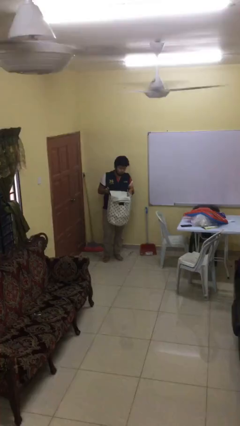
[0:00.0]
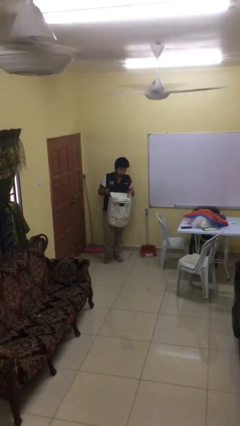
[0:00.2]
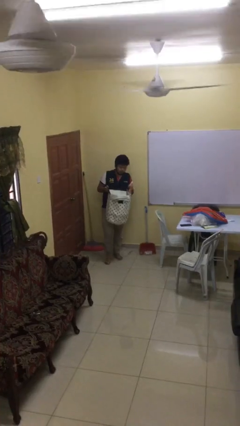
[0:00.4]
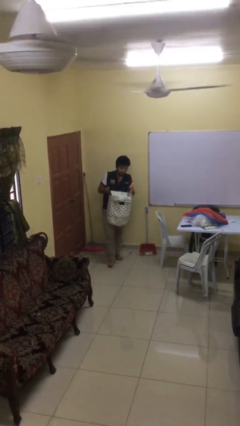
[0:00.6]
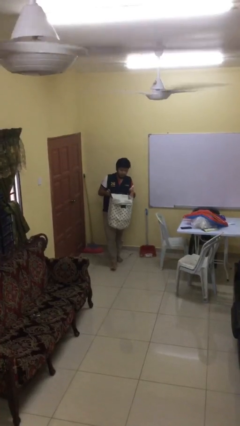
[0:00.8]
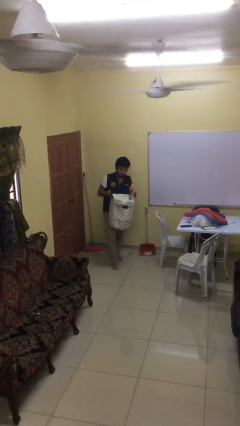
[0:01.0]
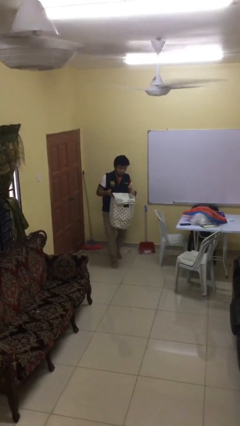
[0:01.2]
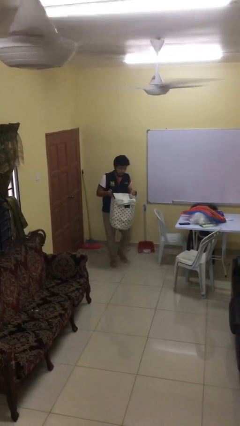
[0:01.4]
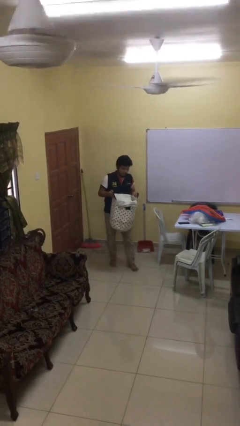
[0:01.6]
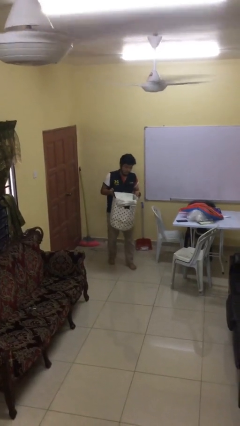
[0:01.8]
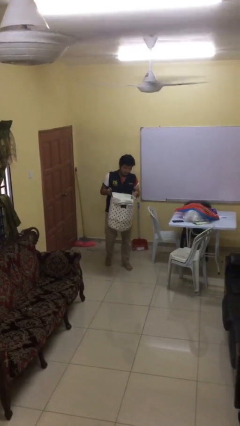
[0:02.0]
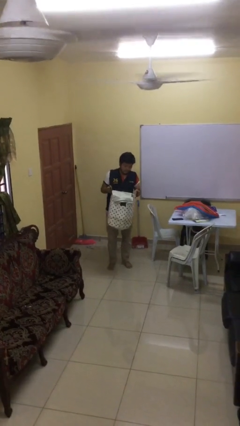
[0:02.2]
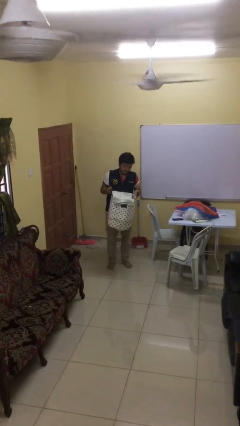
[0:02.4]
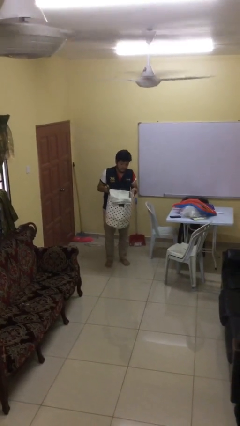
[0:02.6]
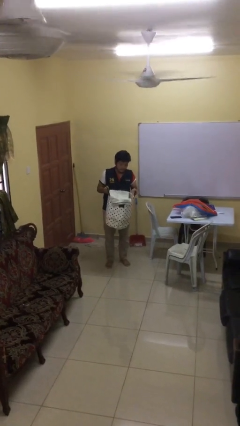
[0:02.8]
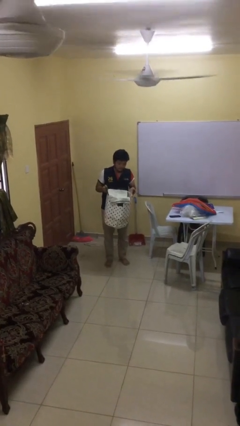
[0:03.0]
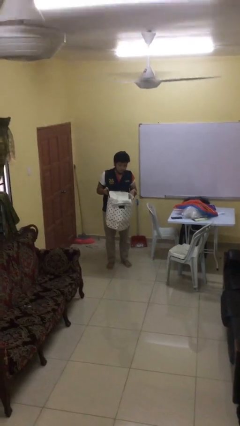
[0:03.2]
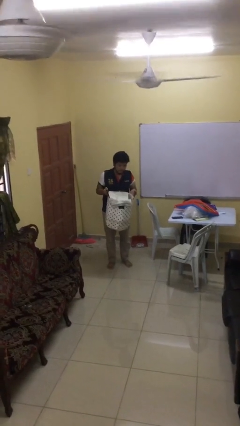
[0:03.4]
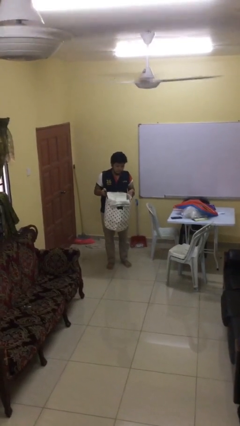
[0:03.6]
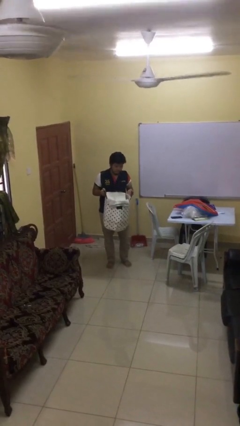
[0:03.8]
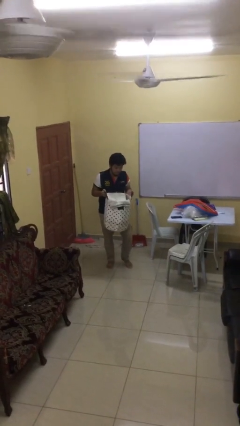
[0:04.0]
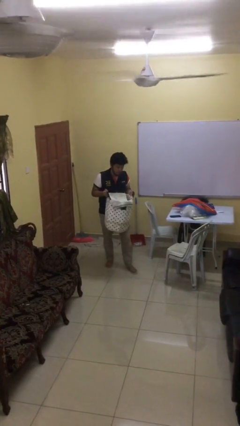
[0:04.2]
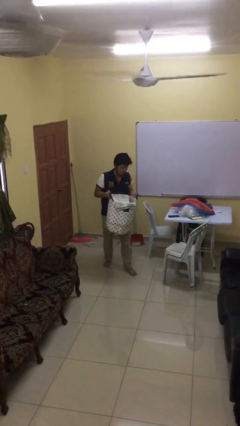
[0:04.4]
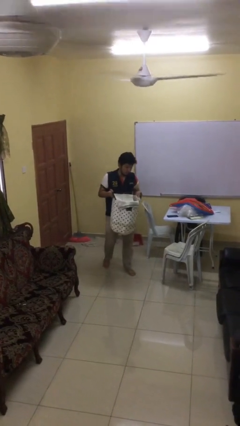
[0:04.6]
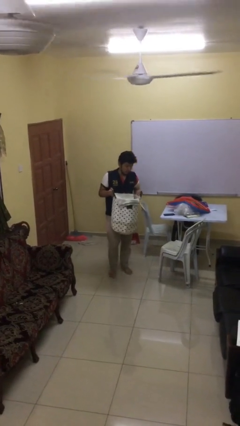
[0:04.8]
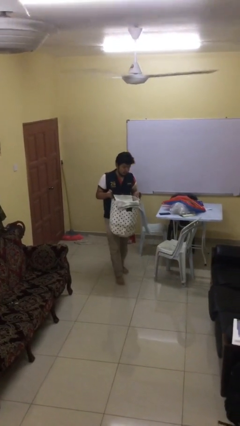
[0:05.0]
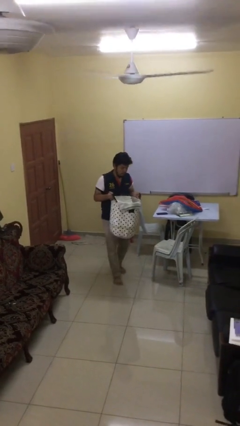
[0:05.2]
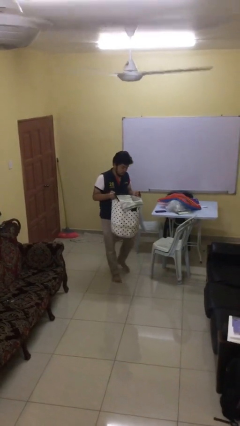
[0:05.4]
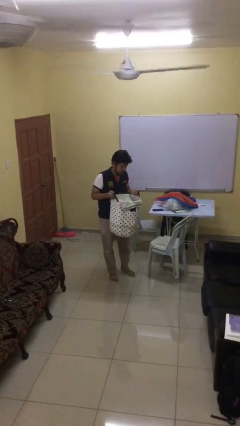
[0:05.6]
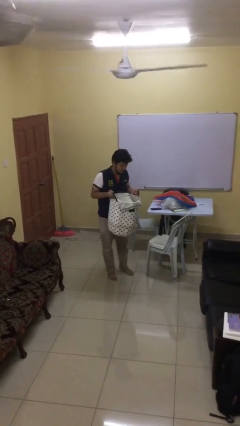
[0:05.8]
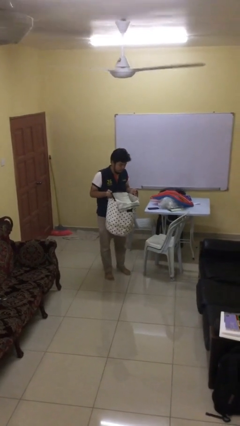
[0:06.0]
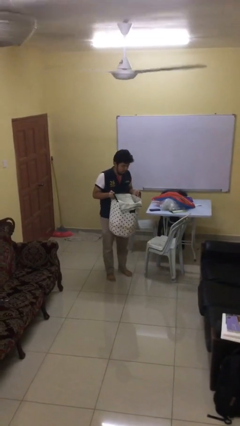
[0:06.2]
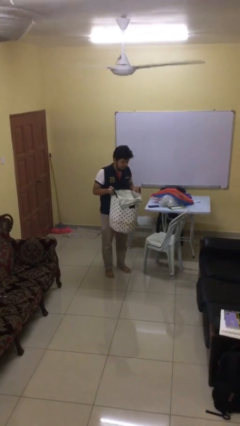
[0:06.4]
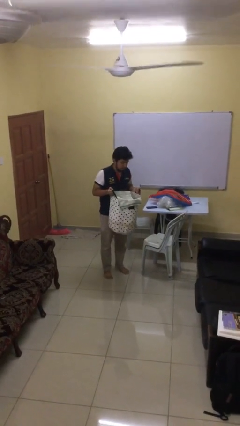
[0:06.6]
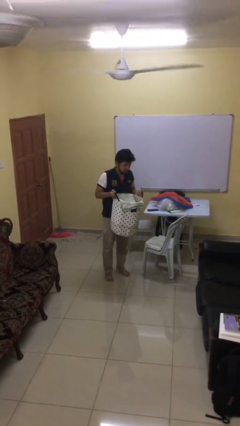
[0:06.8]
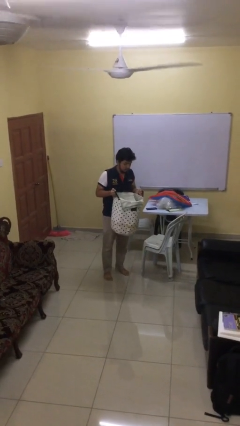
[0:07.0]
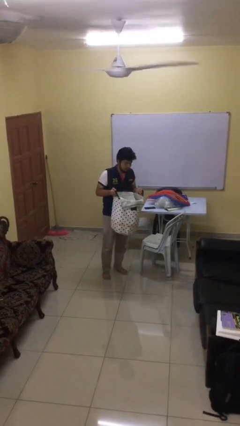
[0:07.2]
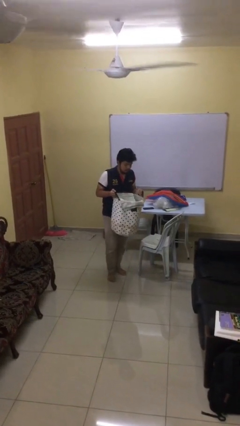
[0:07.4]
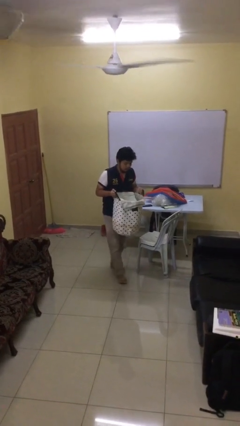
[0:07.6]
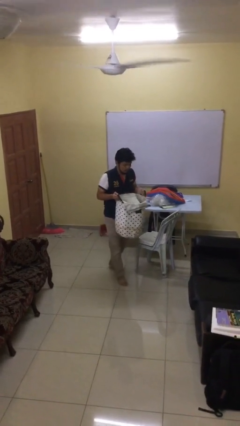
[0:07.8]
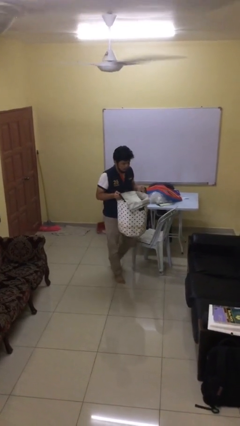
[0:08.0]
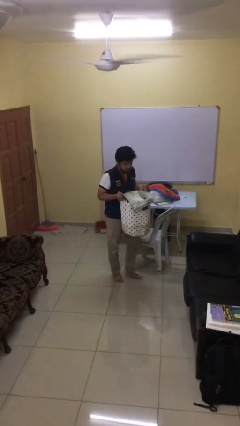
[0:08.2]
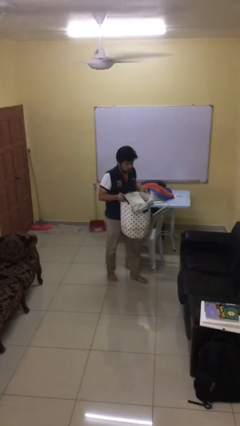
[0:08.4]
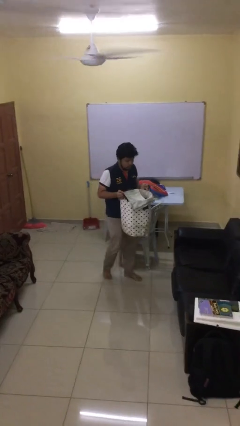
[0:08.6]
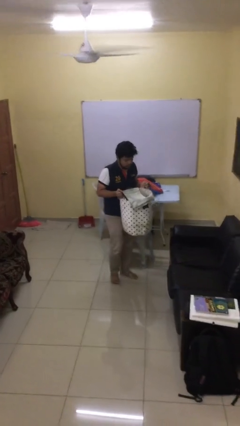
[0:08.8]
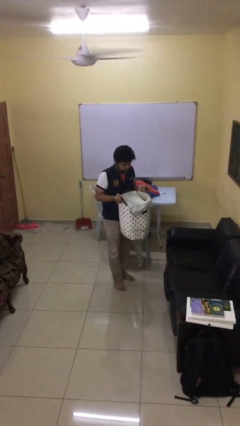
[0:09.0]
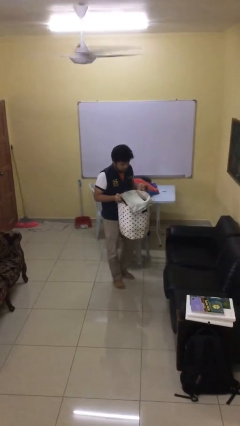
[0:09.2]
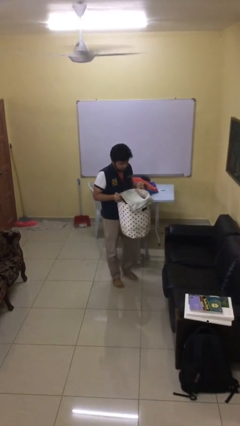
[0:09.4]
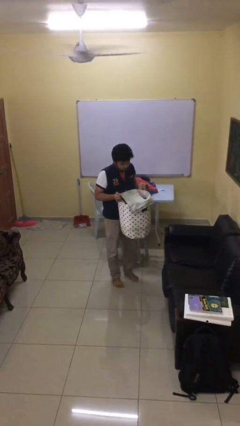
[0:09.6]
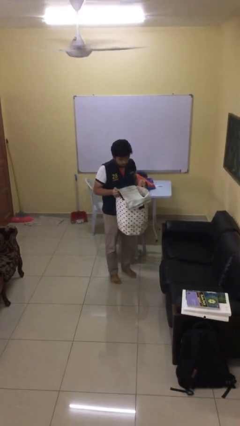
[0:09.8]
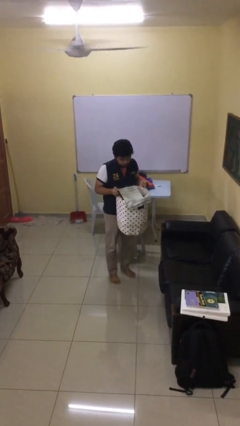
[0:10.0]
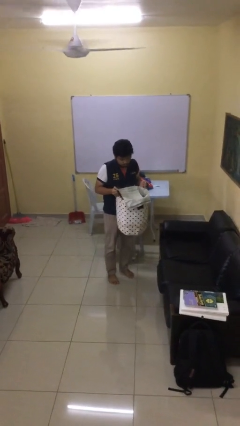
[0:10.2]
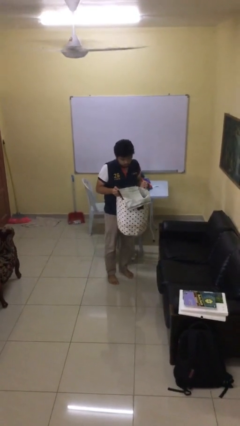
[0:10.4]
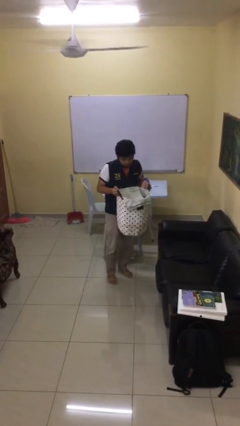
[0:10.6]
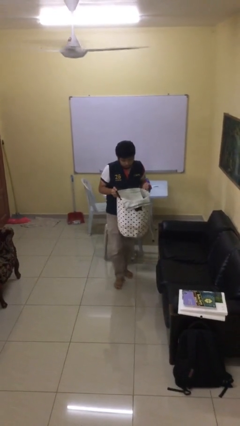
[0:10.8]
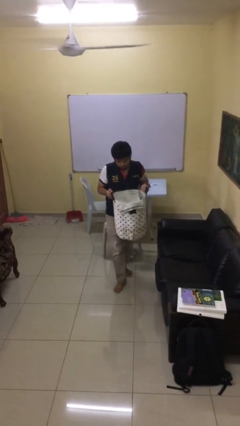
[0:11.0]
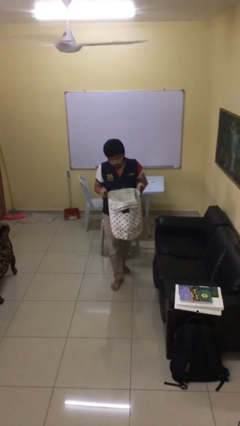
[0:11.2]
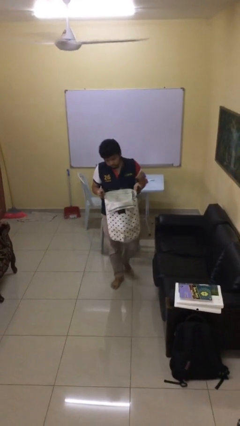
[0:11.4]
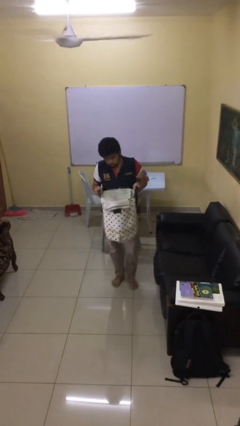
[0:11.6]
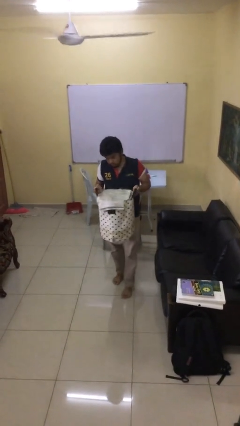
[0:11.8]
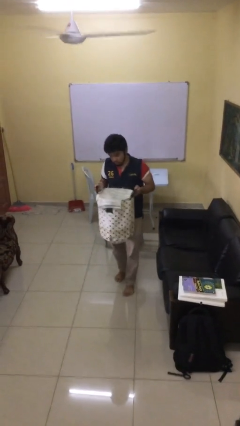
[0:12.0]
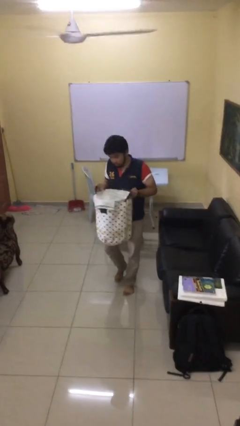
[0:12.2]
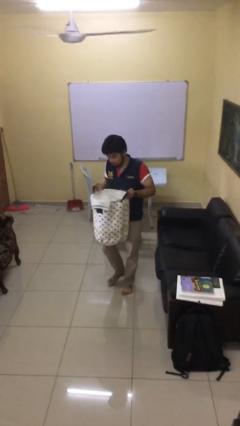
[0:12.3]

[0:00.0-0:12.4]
person carries laundry basket

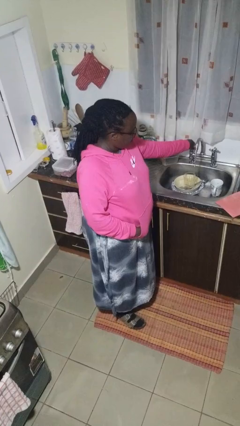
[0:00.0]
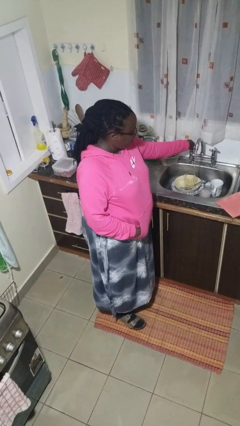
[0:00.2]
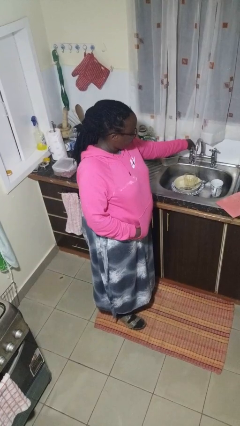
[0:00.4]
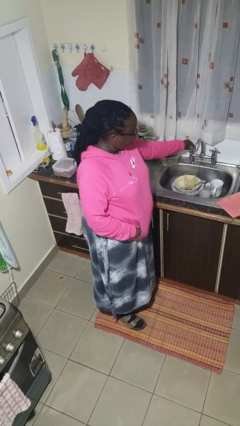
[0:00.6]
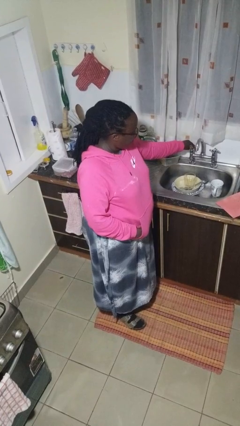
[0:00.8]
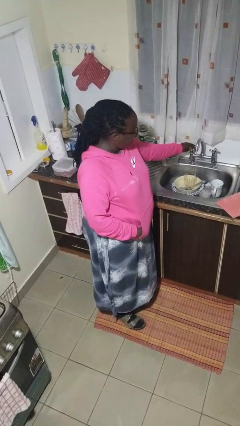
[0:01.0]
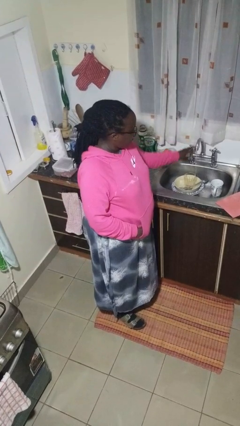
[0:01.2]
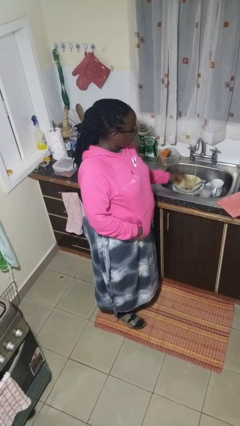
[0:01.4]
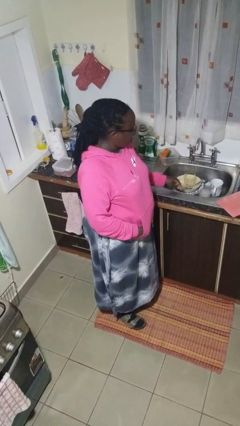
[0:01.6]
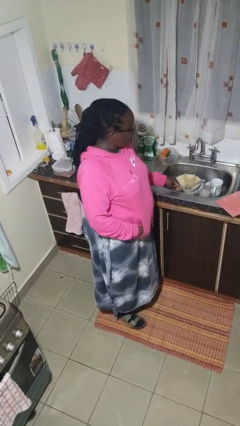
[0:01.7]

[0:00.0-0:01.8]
person turns off faucet

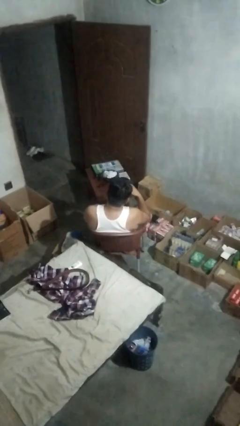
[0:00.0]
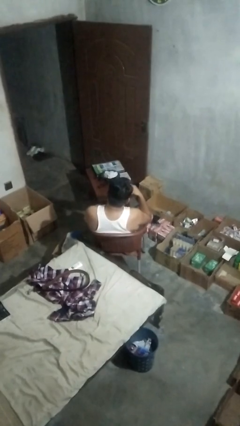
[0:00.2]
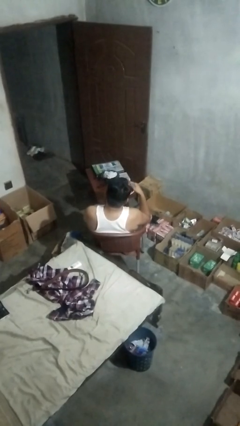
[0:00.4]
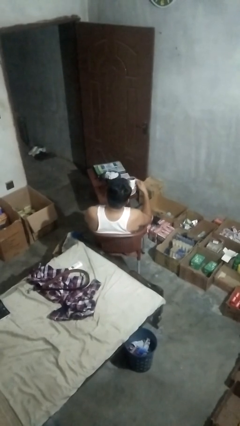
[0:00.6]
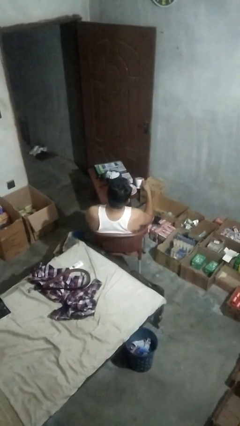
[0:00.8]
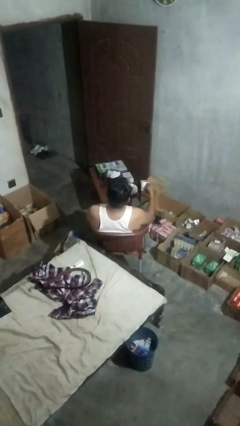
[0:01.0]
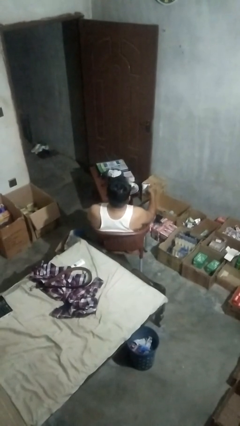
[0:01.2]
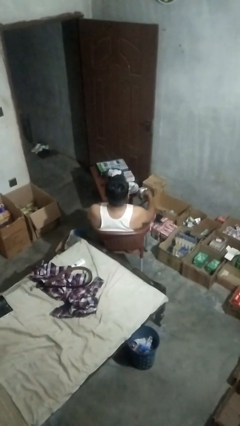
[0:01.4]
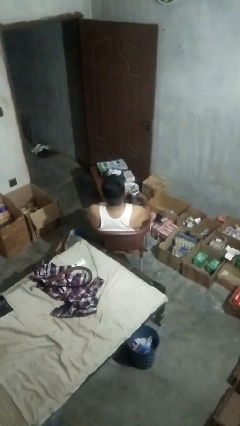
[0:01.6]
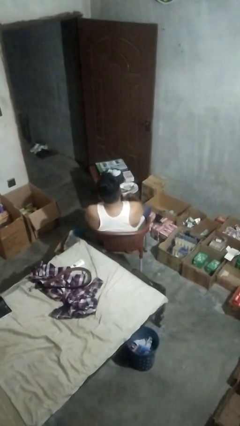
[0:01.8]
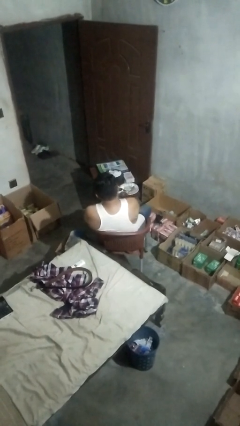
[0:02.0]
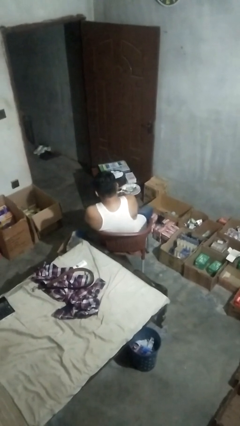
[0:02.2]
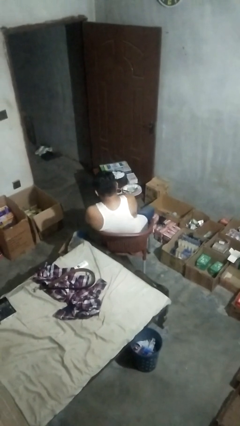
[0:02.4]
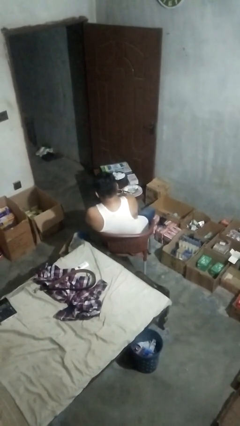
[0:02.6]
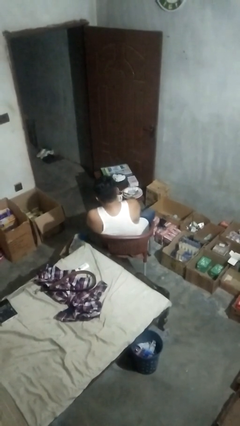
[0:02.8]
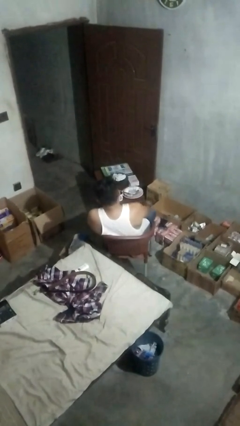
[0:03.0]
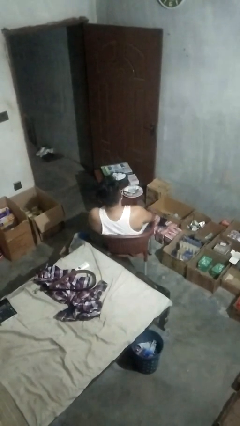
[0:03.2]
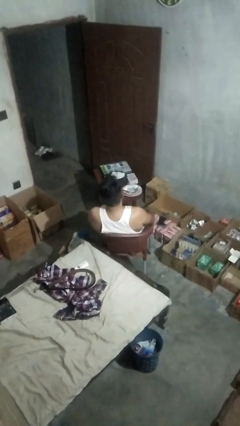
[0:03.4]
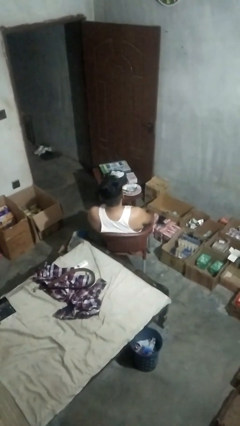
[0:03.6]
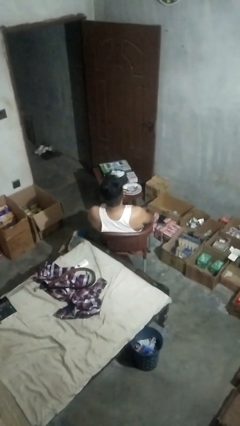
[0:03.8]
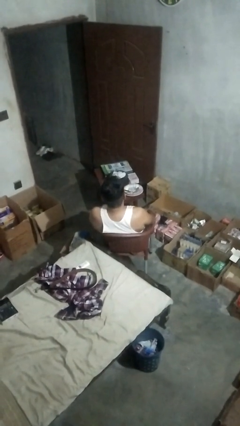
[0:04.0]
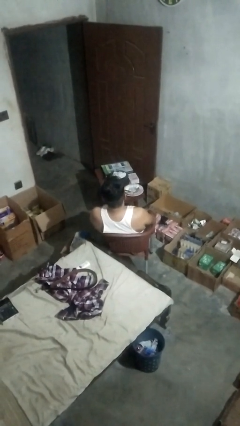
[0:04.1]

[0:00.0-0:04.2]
person puts down object on table
